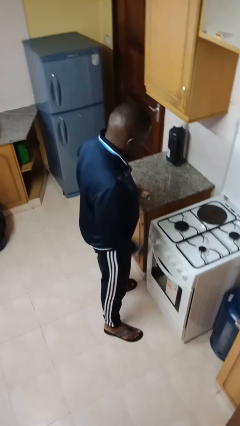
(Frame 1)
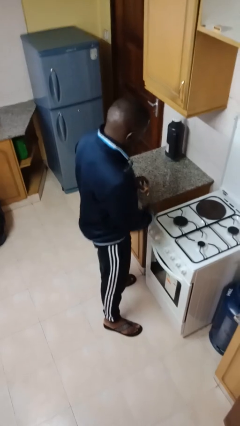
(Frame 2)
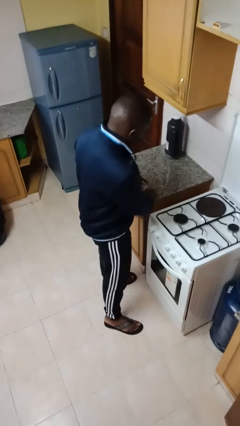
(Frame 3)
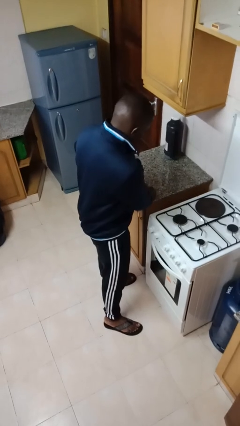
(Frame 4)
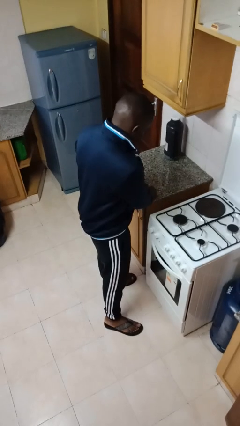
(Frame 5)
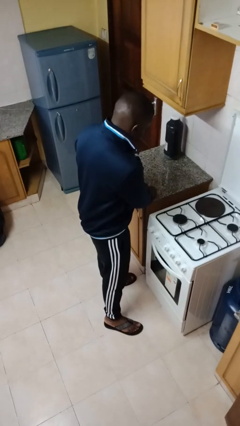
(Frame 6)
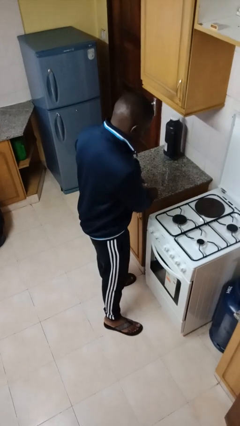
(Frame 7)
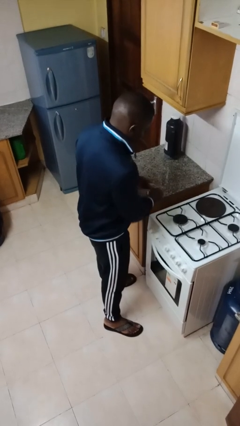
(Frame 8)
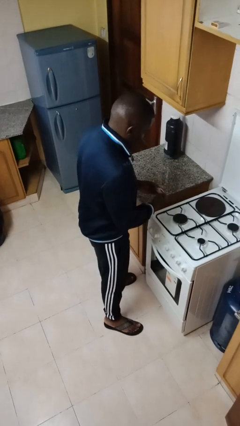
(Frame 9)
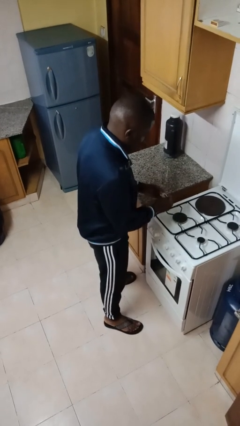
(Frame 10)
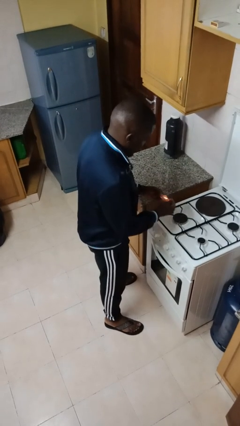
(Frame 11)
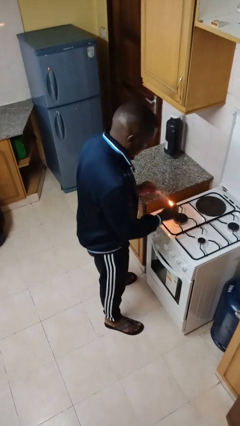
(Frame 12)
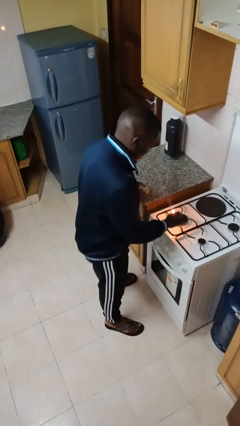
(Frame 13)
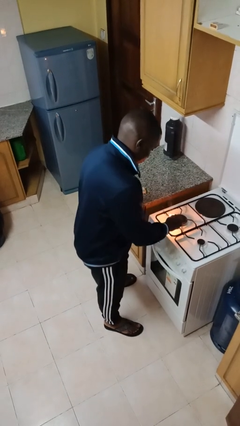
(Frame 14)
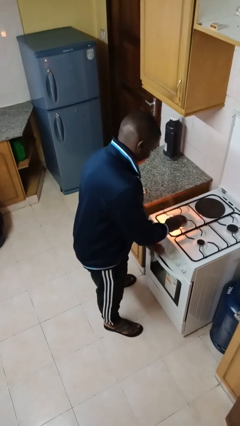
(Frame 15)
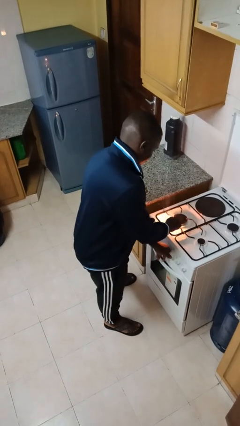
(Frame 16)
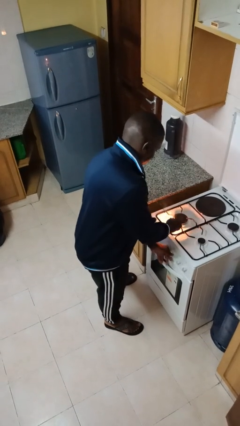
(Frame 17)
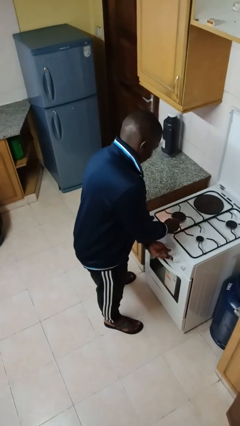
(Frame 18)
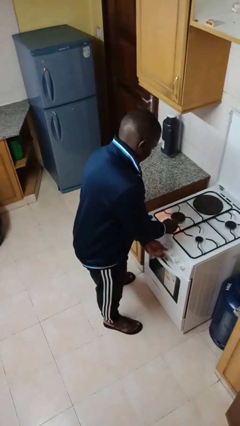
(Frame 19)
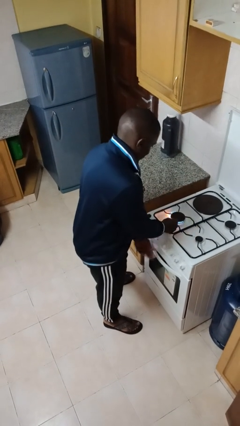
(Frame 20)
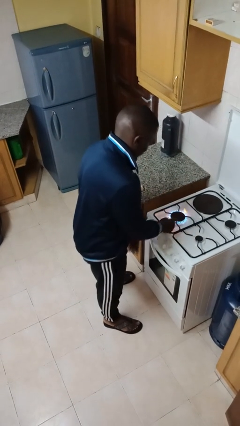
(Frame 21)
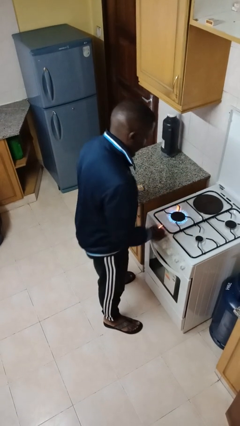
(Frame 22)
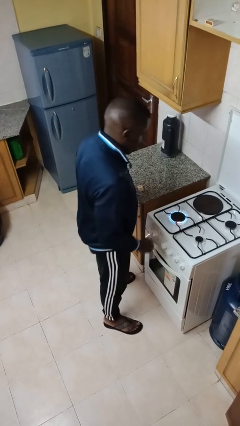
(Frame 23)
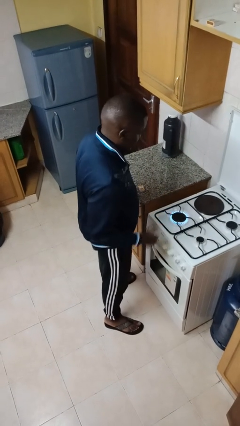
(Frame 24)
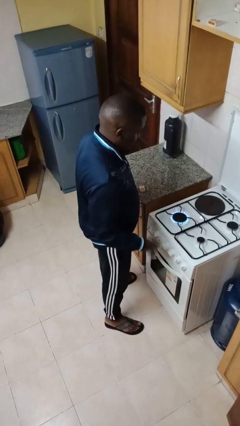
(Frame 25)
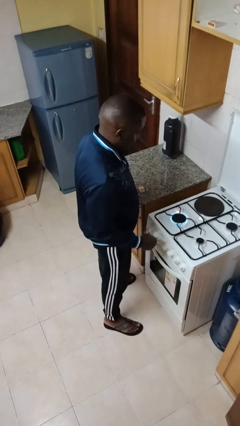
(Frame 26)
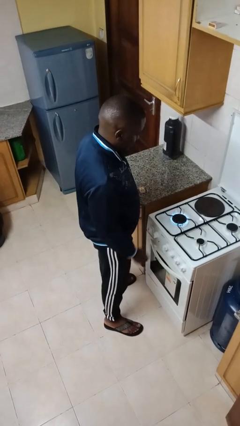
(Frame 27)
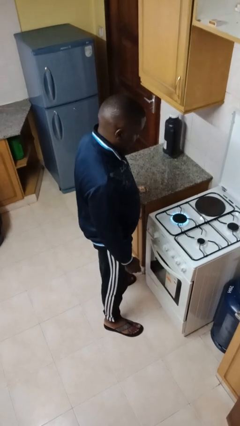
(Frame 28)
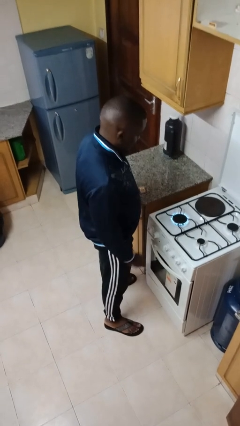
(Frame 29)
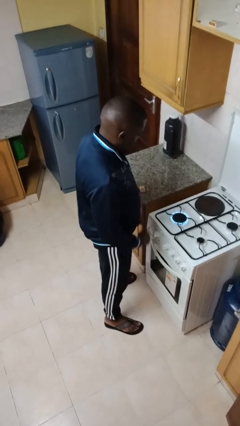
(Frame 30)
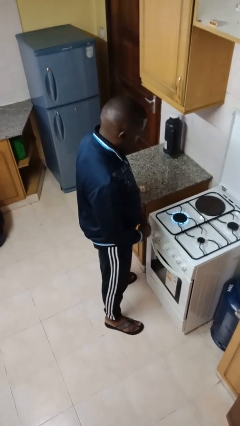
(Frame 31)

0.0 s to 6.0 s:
person turns on stovetop

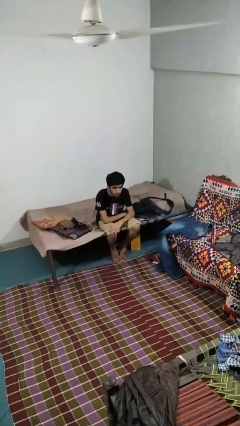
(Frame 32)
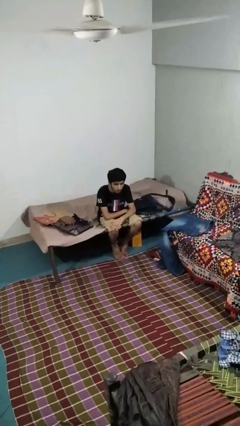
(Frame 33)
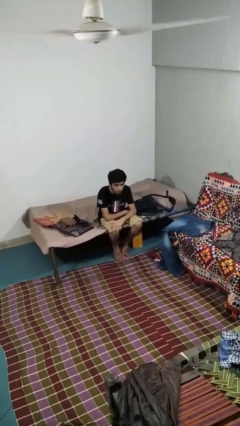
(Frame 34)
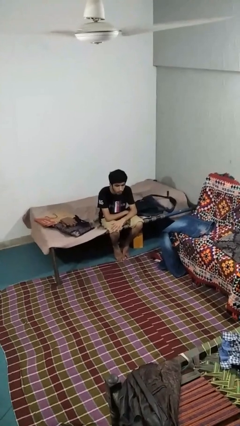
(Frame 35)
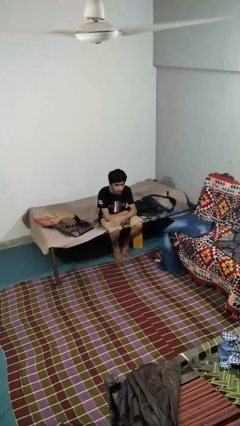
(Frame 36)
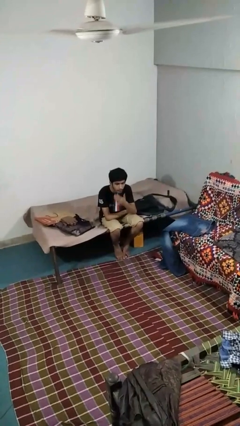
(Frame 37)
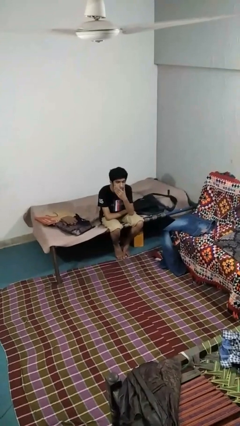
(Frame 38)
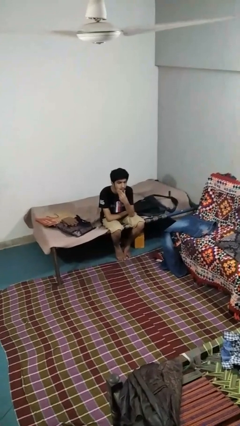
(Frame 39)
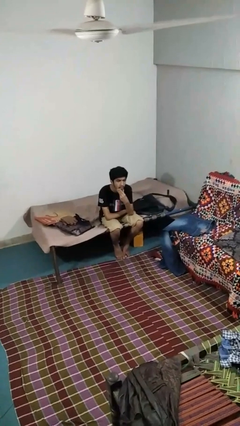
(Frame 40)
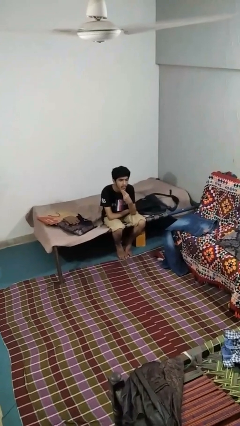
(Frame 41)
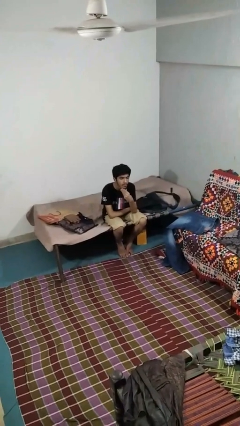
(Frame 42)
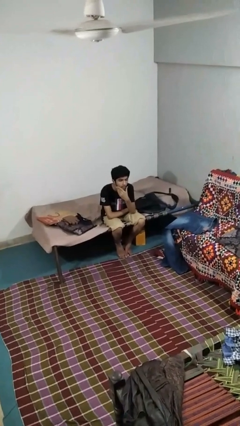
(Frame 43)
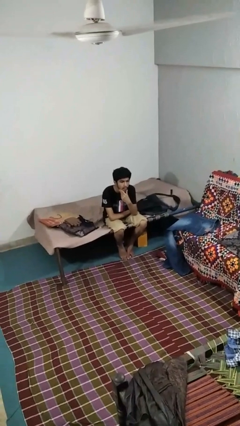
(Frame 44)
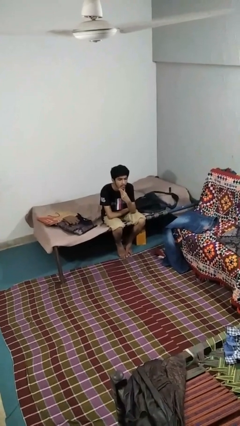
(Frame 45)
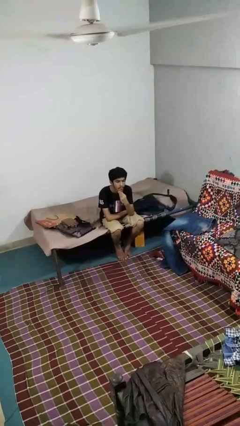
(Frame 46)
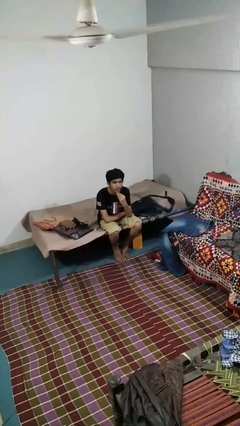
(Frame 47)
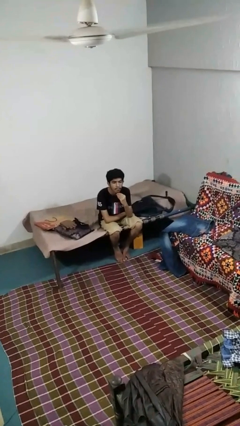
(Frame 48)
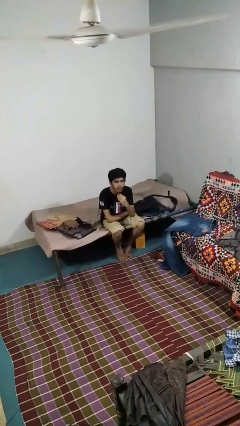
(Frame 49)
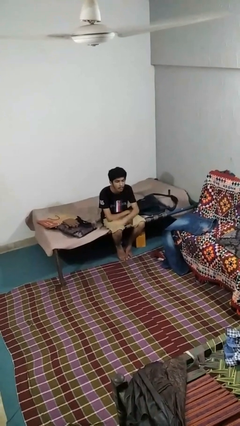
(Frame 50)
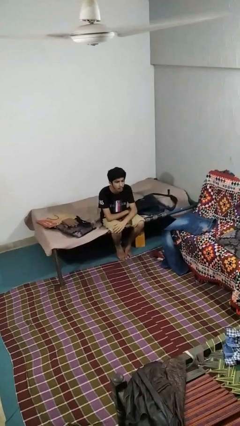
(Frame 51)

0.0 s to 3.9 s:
person strokes chin

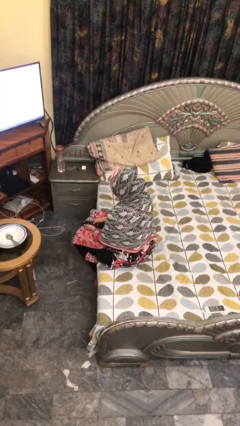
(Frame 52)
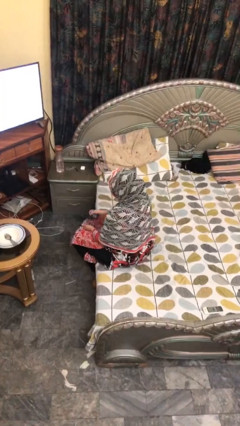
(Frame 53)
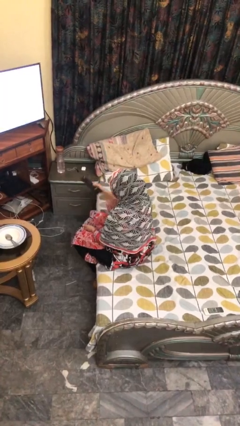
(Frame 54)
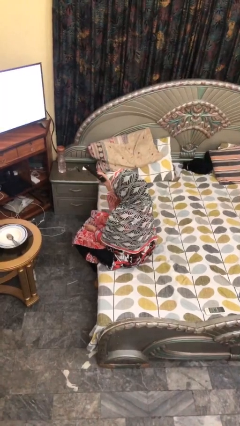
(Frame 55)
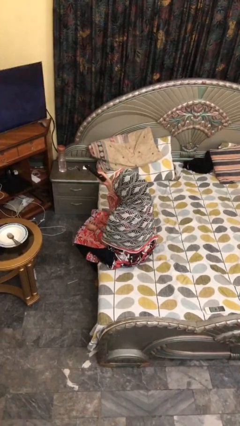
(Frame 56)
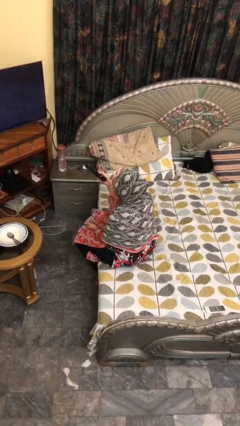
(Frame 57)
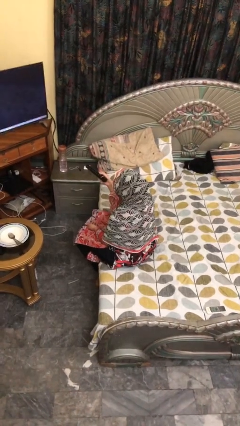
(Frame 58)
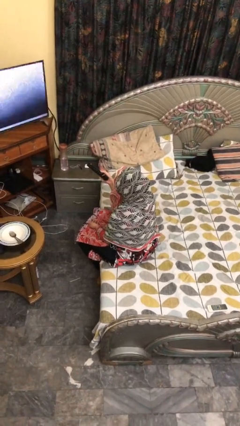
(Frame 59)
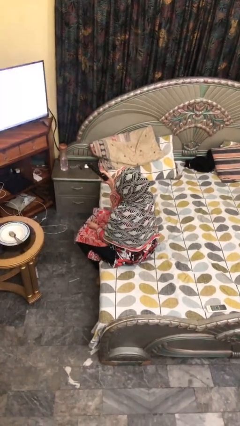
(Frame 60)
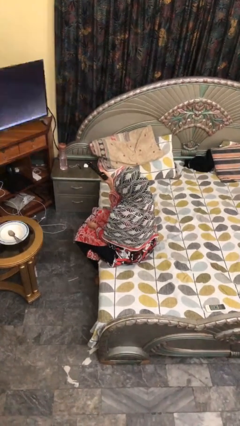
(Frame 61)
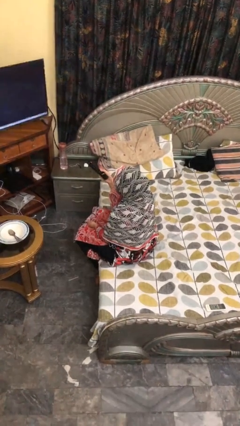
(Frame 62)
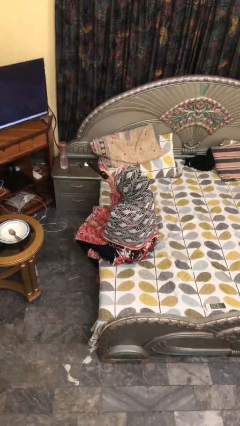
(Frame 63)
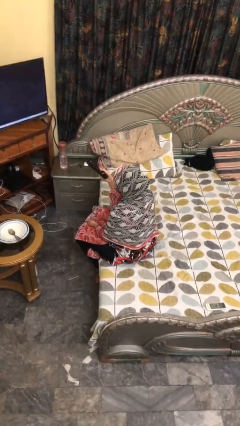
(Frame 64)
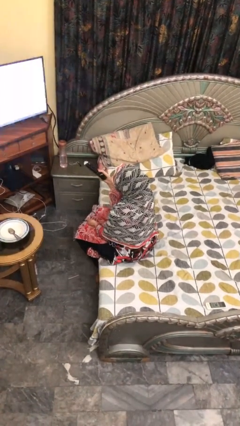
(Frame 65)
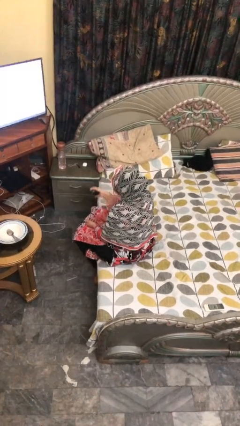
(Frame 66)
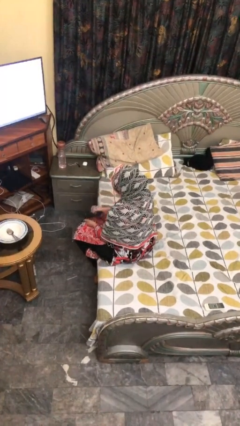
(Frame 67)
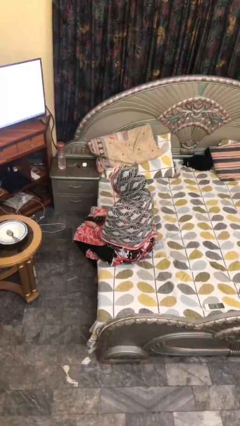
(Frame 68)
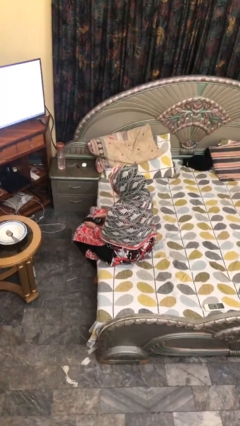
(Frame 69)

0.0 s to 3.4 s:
person uses television remote

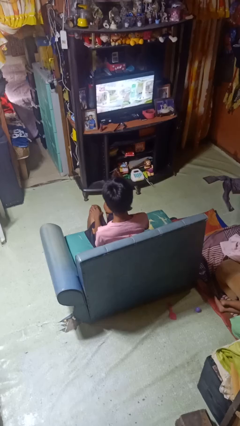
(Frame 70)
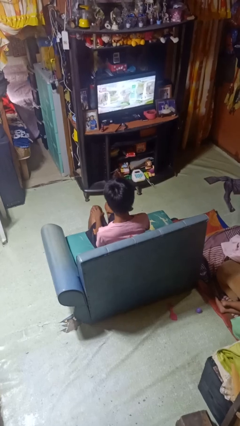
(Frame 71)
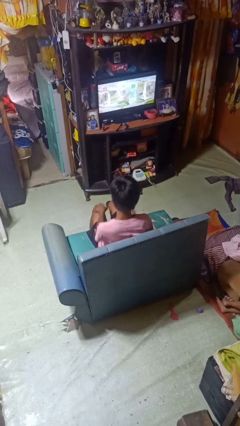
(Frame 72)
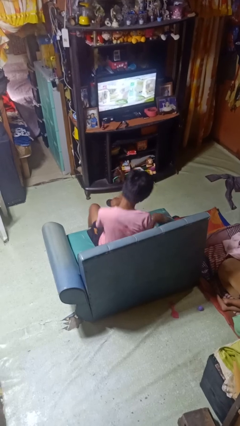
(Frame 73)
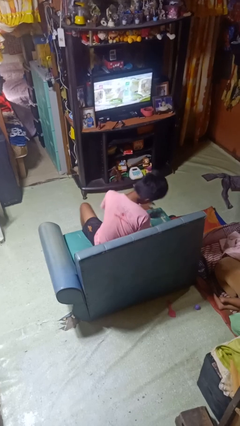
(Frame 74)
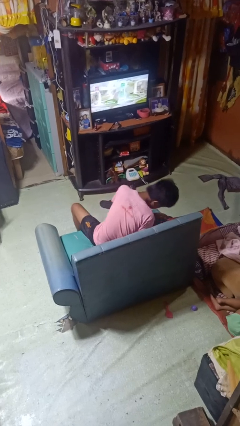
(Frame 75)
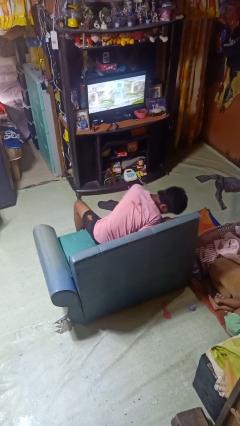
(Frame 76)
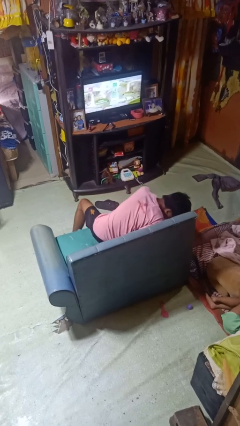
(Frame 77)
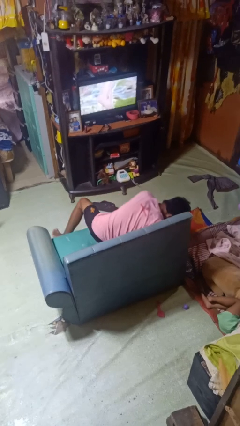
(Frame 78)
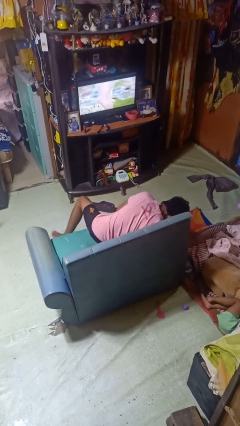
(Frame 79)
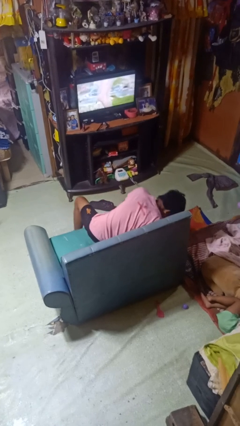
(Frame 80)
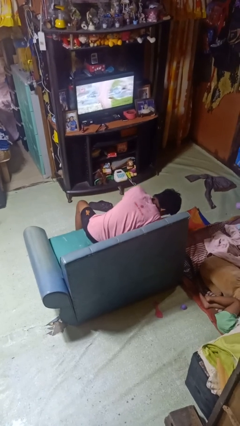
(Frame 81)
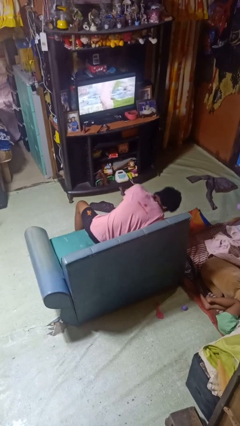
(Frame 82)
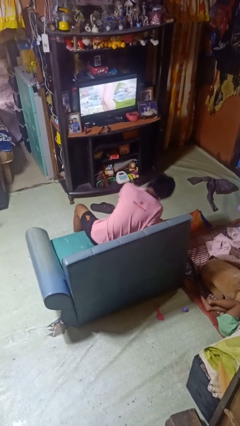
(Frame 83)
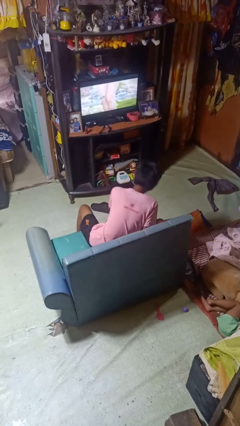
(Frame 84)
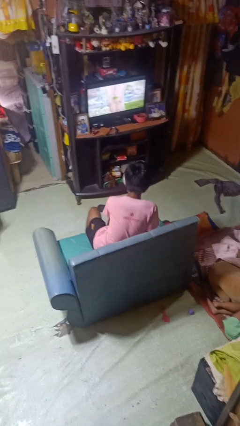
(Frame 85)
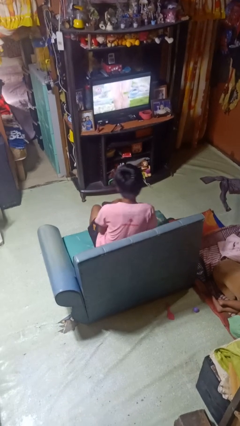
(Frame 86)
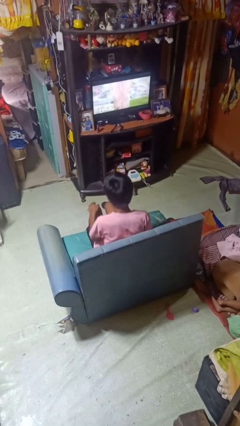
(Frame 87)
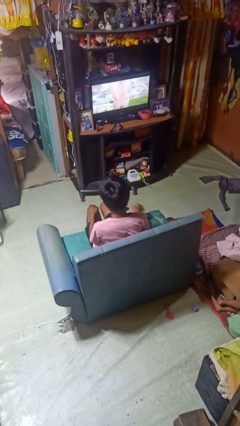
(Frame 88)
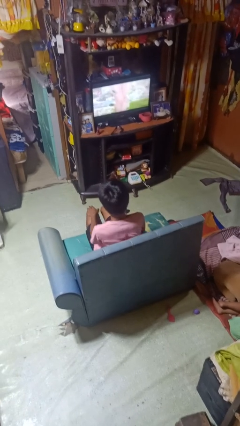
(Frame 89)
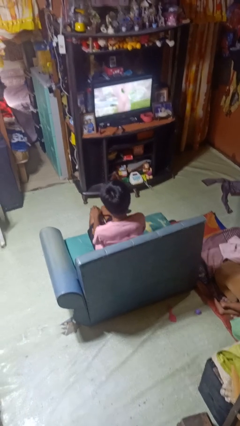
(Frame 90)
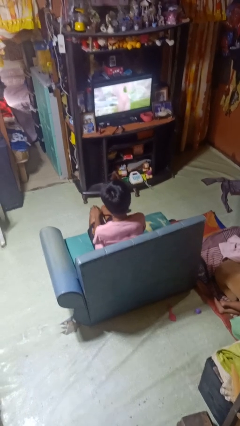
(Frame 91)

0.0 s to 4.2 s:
person searches in couch

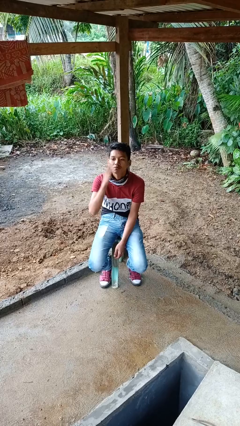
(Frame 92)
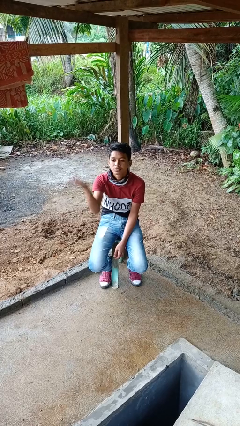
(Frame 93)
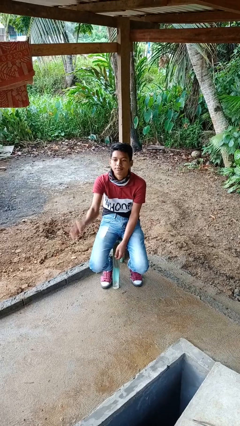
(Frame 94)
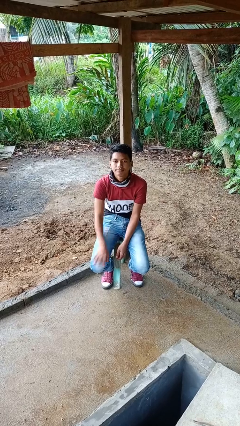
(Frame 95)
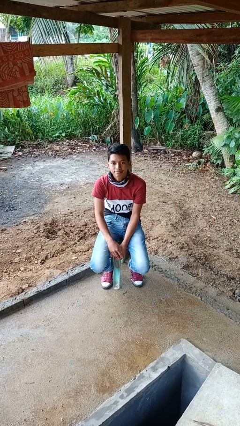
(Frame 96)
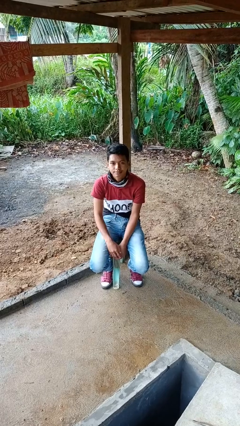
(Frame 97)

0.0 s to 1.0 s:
person gestures blow kiss
